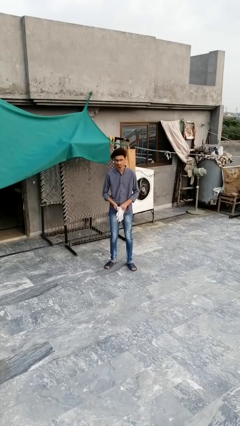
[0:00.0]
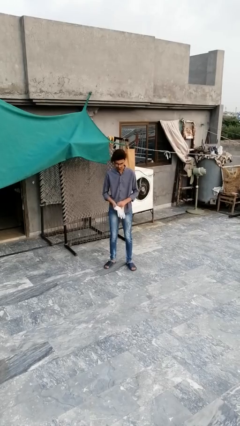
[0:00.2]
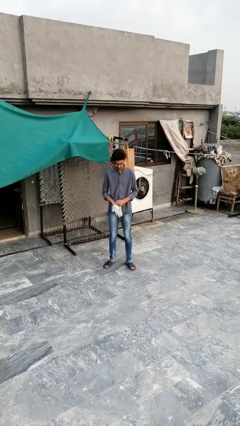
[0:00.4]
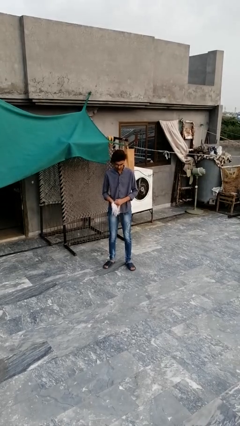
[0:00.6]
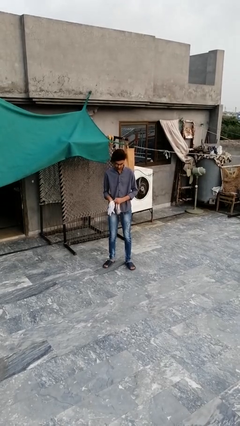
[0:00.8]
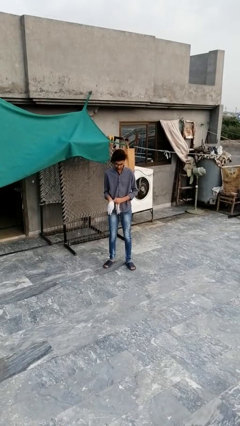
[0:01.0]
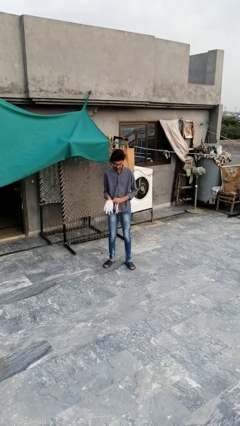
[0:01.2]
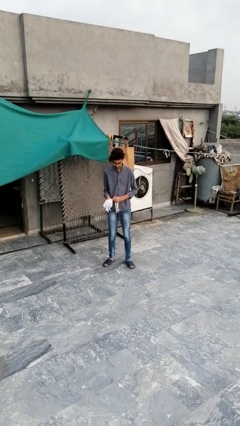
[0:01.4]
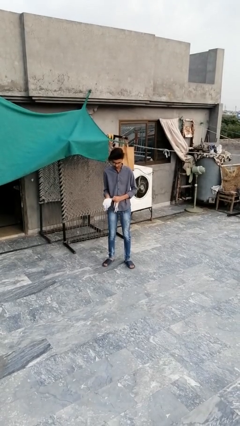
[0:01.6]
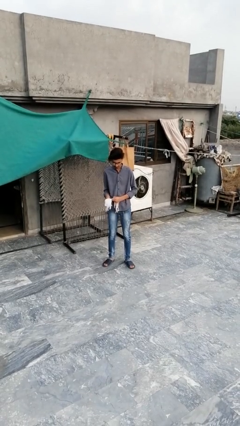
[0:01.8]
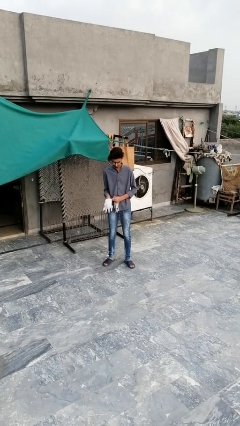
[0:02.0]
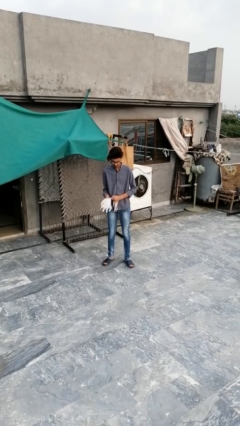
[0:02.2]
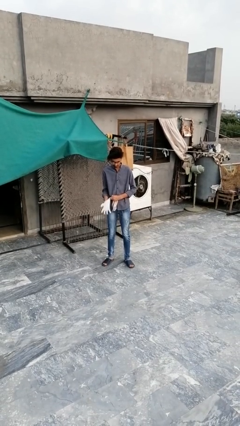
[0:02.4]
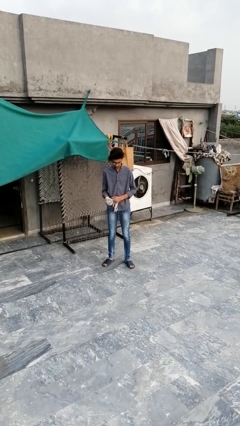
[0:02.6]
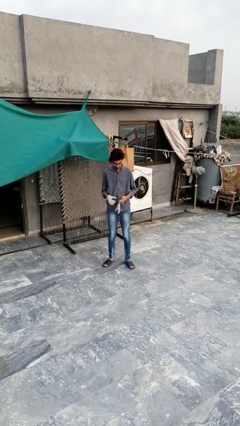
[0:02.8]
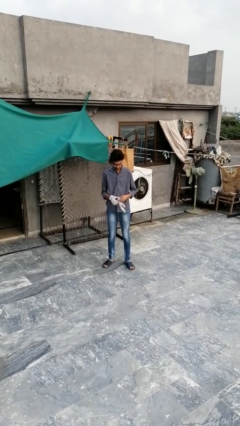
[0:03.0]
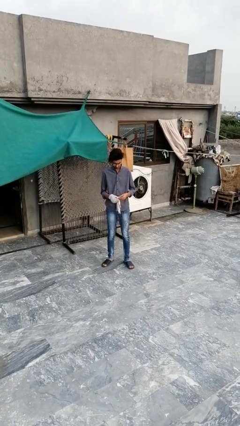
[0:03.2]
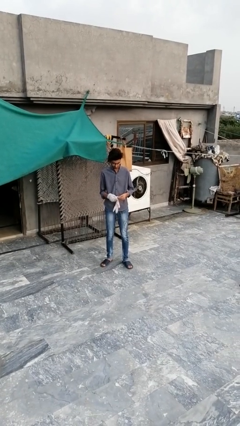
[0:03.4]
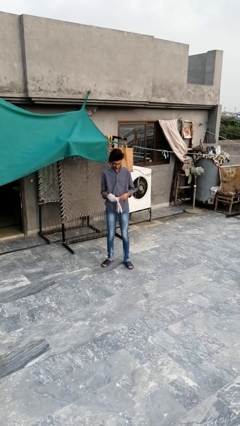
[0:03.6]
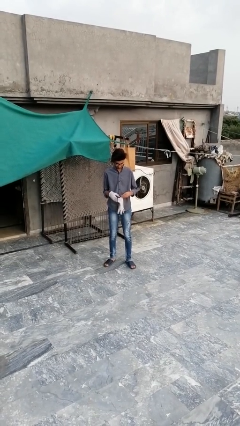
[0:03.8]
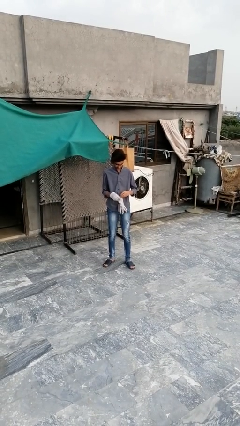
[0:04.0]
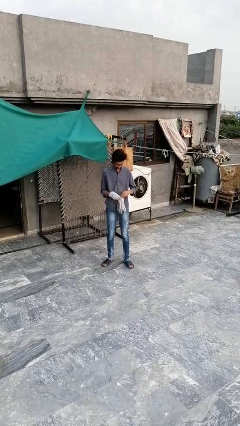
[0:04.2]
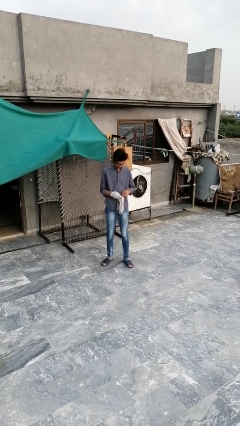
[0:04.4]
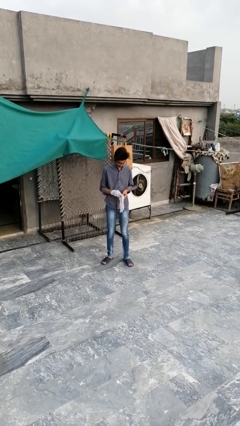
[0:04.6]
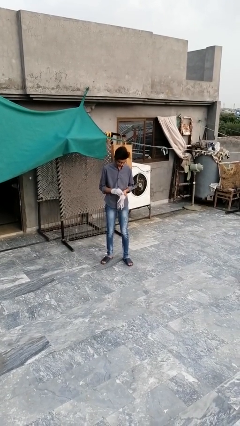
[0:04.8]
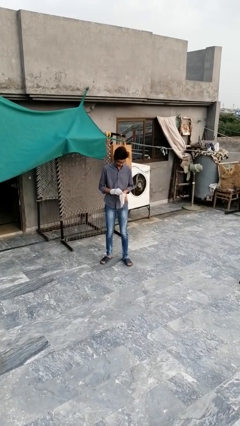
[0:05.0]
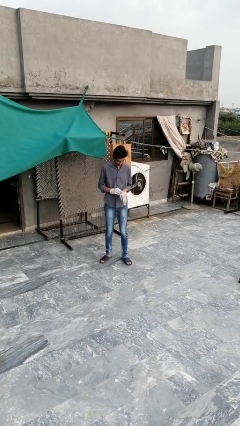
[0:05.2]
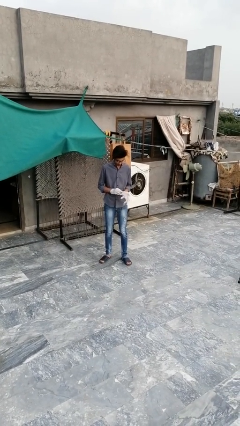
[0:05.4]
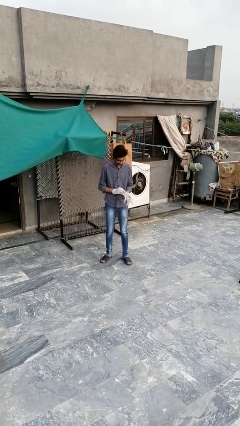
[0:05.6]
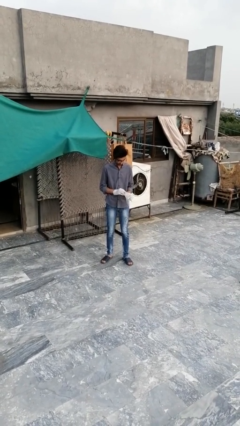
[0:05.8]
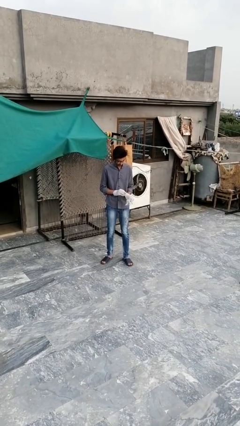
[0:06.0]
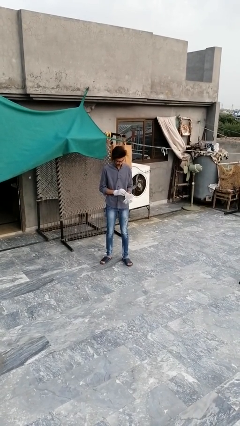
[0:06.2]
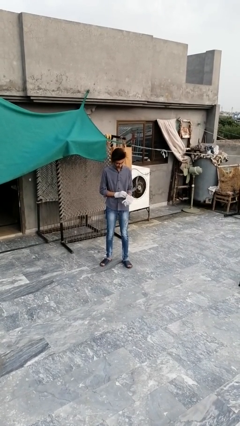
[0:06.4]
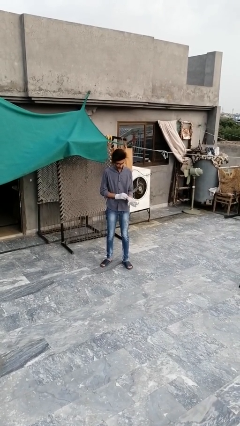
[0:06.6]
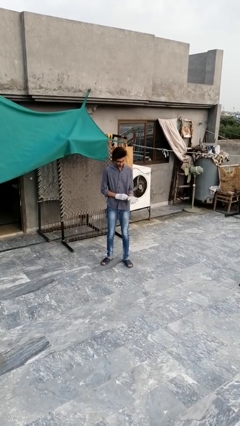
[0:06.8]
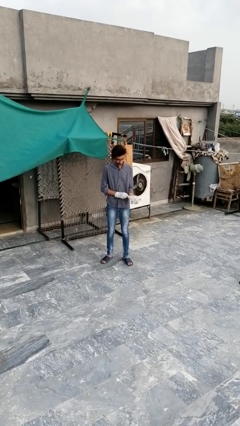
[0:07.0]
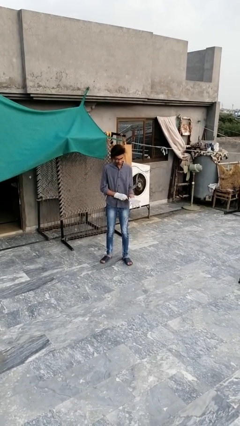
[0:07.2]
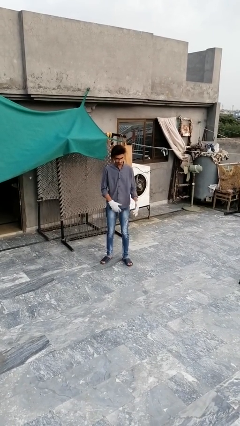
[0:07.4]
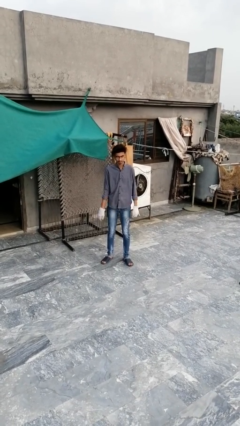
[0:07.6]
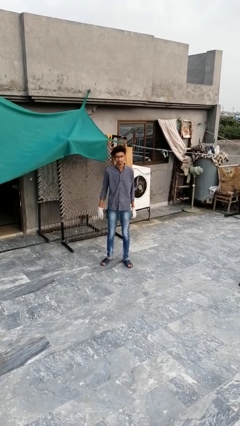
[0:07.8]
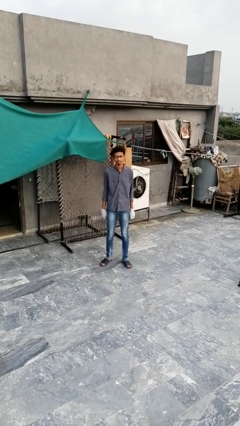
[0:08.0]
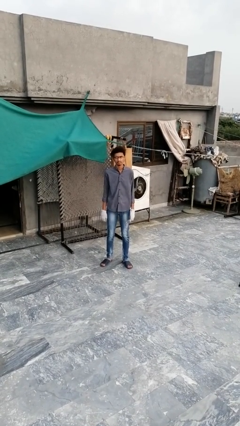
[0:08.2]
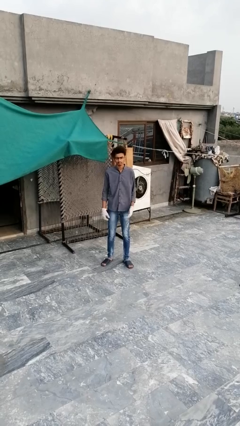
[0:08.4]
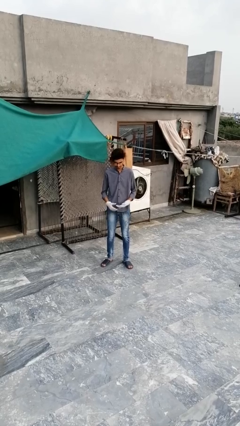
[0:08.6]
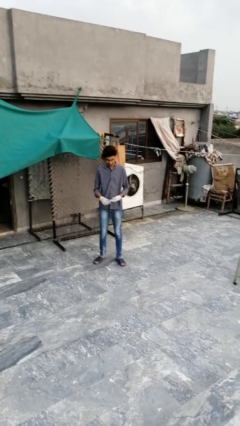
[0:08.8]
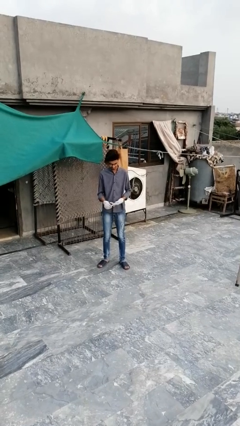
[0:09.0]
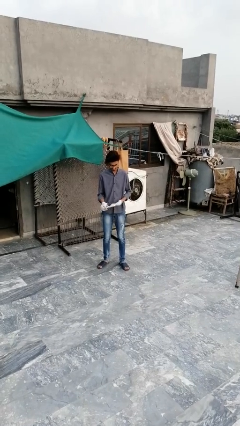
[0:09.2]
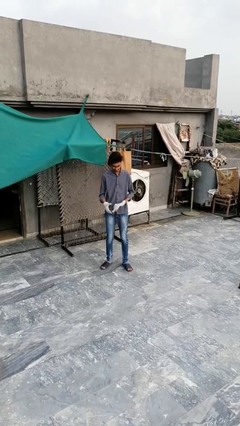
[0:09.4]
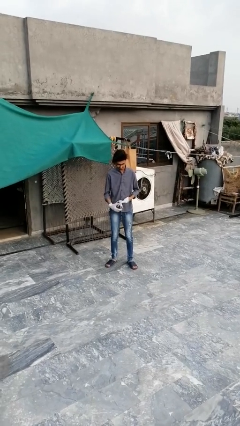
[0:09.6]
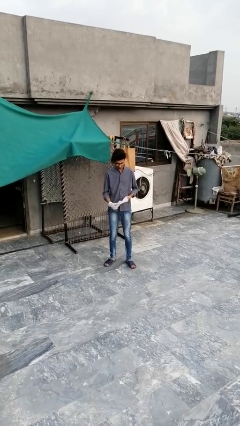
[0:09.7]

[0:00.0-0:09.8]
person puts on gloves

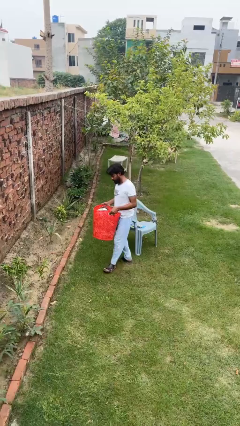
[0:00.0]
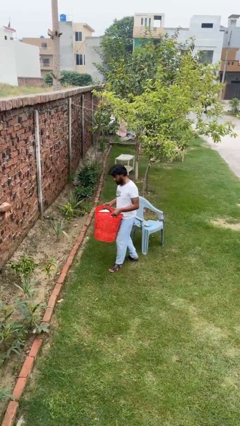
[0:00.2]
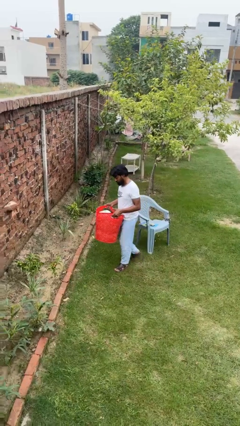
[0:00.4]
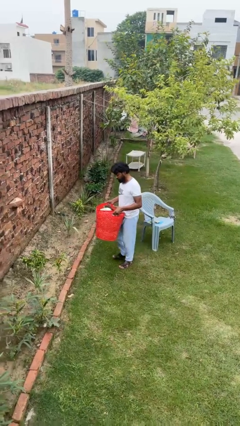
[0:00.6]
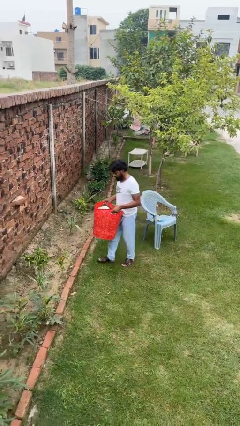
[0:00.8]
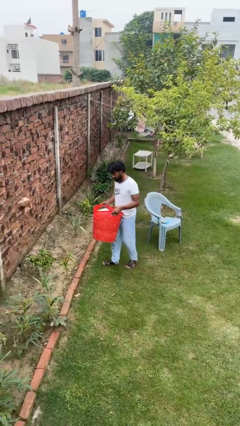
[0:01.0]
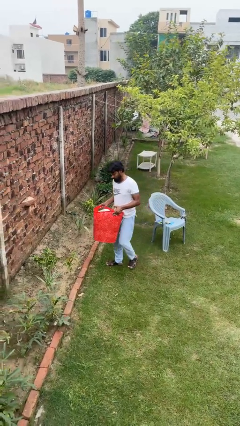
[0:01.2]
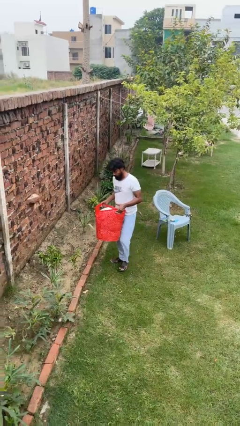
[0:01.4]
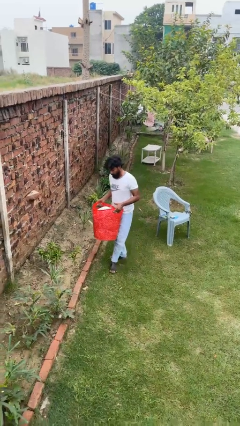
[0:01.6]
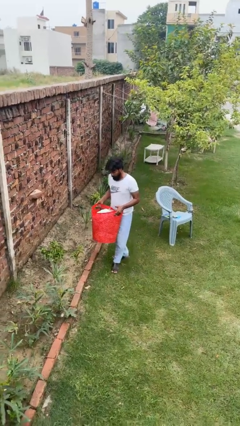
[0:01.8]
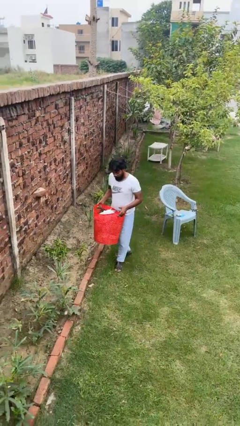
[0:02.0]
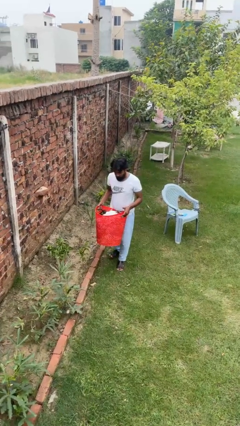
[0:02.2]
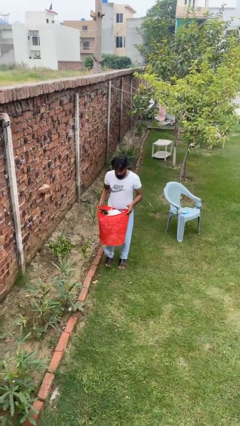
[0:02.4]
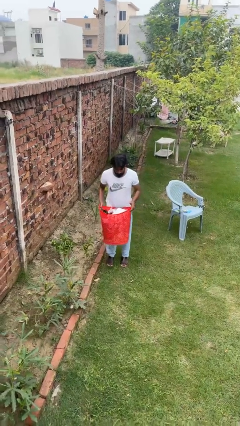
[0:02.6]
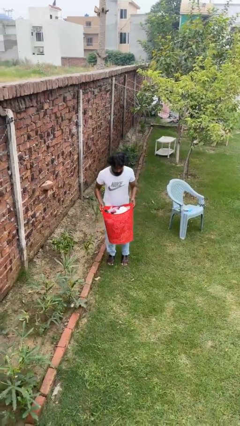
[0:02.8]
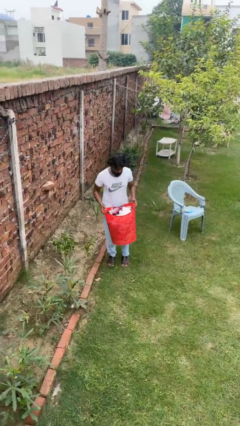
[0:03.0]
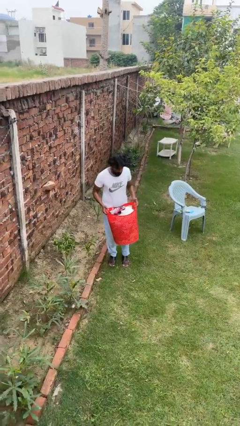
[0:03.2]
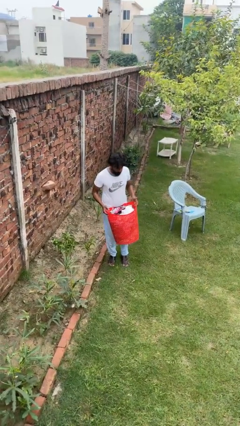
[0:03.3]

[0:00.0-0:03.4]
person carries laundry basket

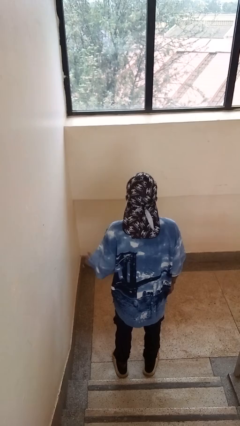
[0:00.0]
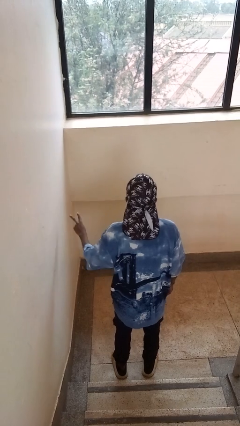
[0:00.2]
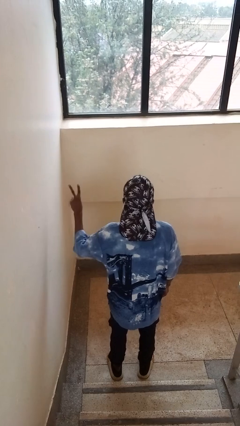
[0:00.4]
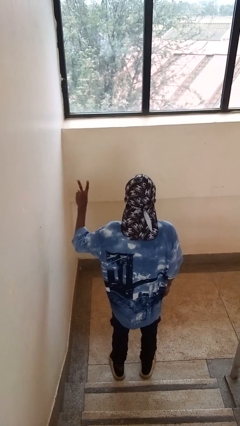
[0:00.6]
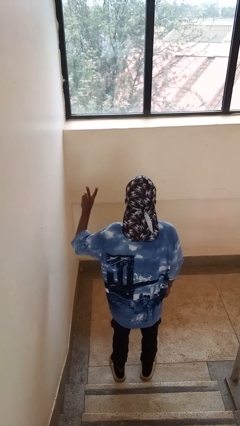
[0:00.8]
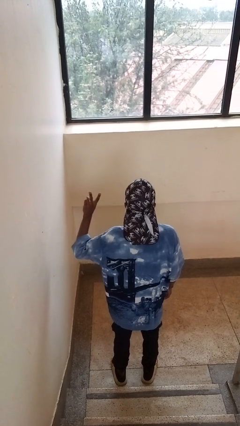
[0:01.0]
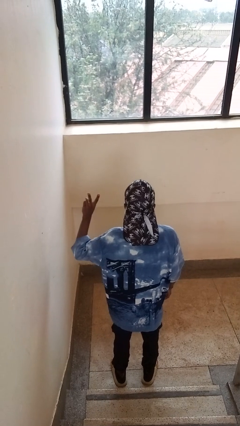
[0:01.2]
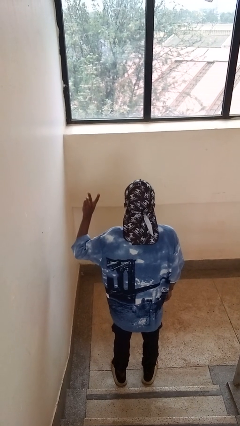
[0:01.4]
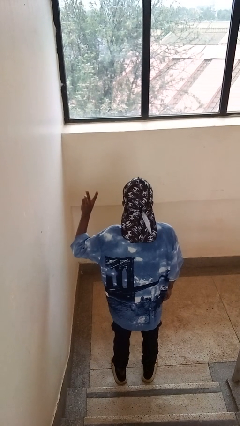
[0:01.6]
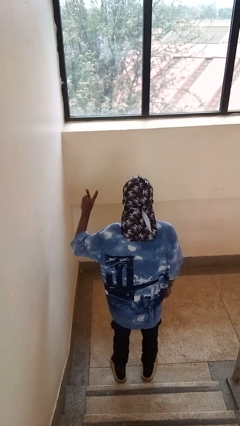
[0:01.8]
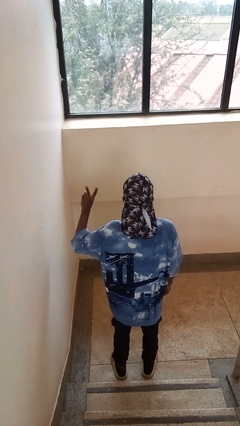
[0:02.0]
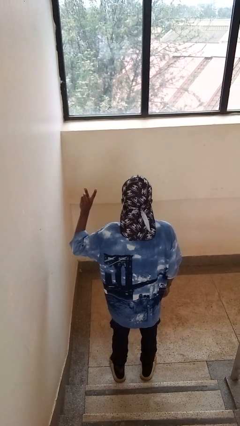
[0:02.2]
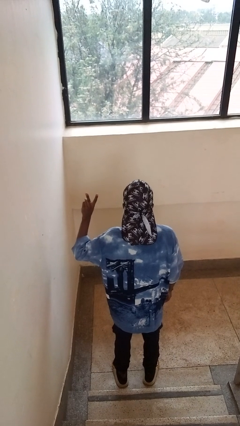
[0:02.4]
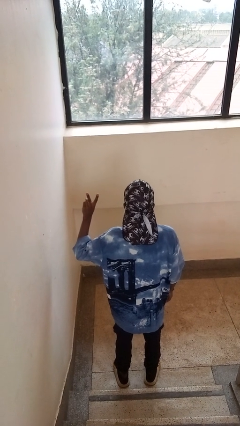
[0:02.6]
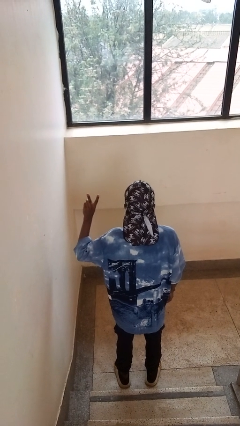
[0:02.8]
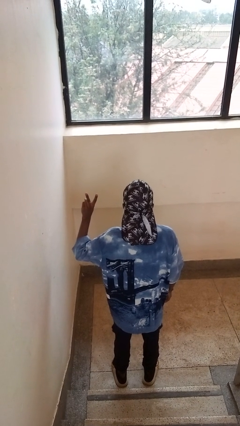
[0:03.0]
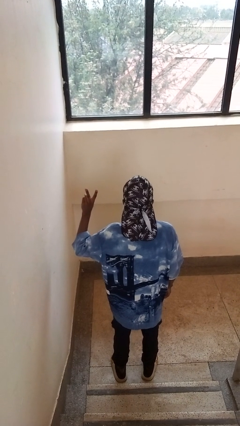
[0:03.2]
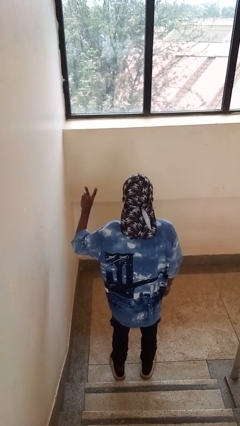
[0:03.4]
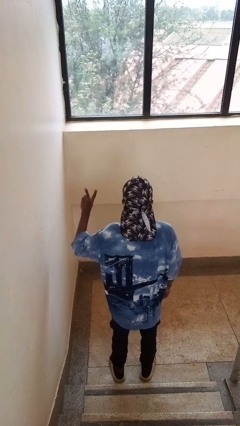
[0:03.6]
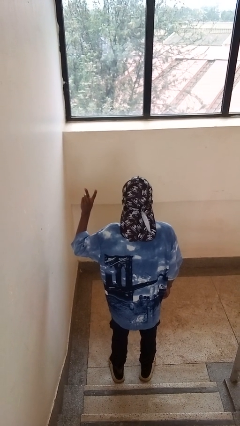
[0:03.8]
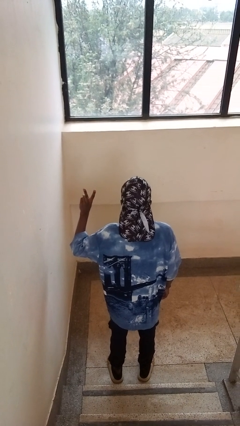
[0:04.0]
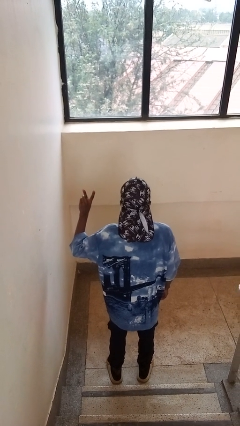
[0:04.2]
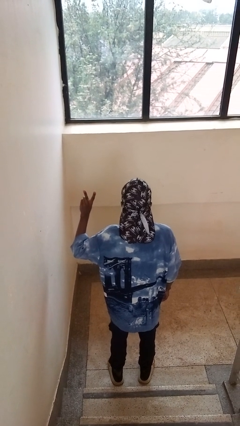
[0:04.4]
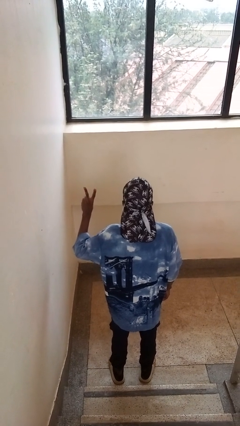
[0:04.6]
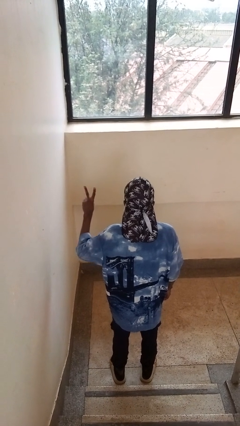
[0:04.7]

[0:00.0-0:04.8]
person gestures peace

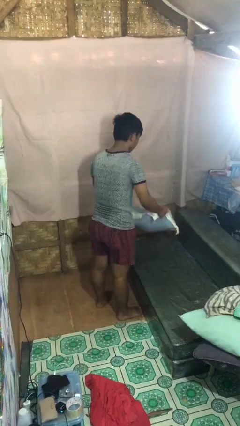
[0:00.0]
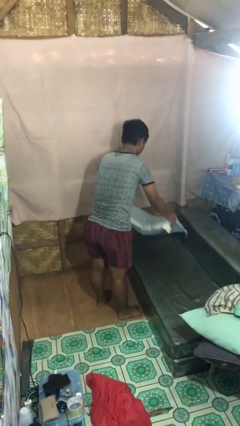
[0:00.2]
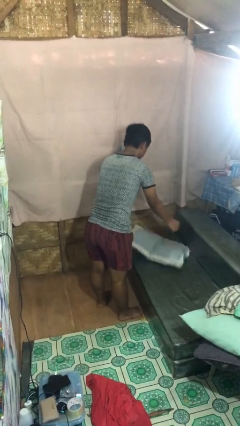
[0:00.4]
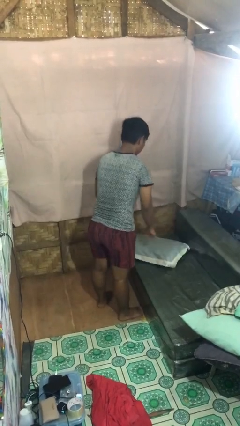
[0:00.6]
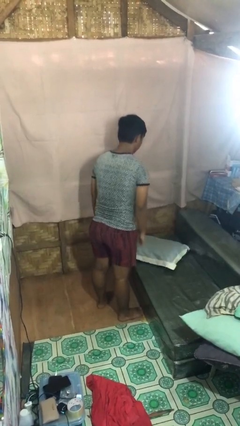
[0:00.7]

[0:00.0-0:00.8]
person puts down object on couch
